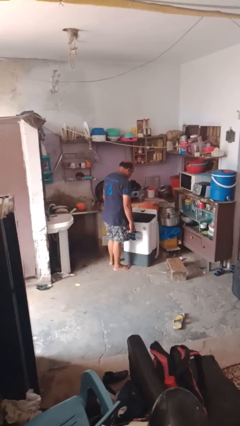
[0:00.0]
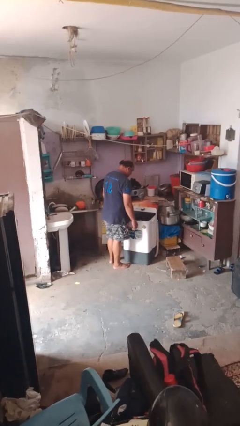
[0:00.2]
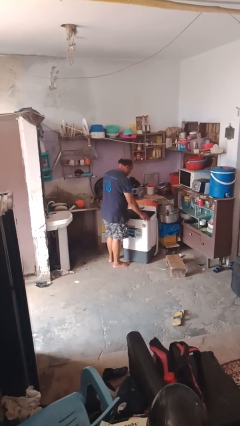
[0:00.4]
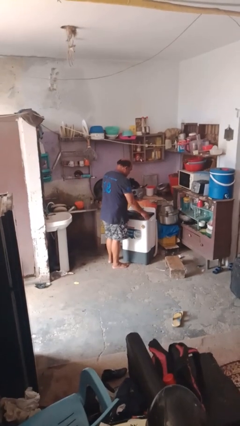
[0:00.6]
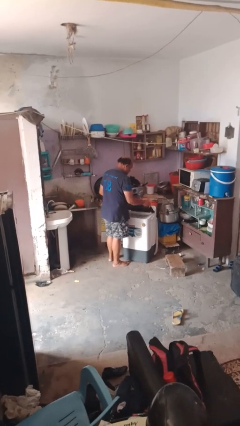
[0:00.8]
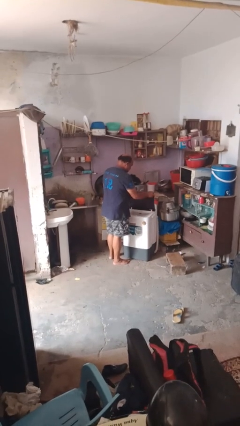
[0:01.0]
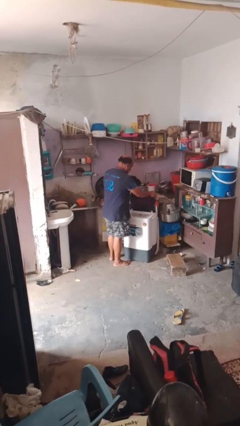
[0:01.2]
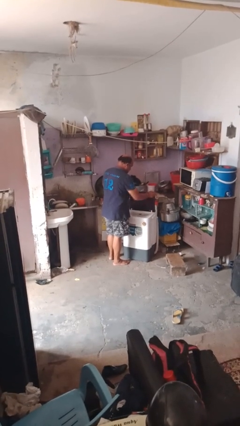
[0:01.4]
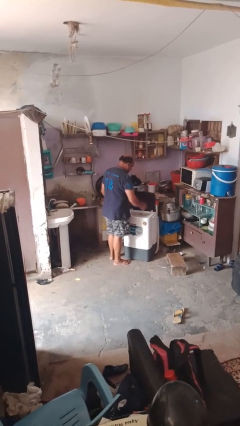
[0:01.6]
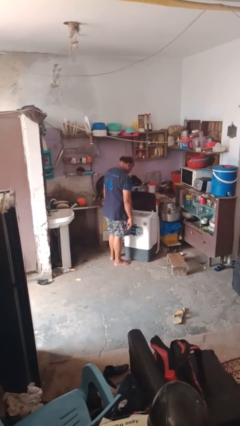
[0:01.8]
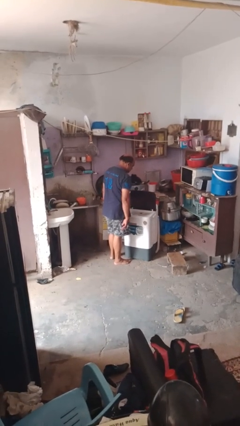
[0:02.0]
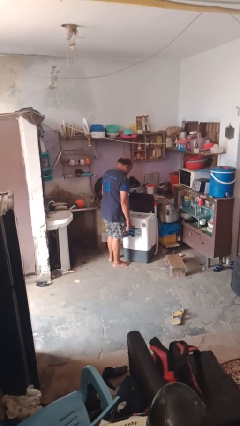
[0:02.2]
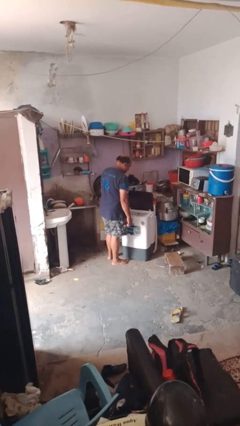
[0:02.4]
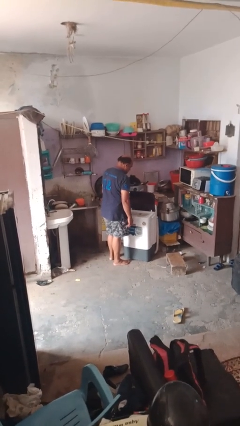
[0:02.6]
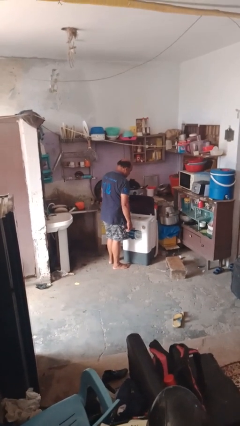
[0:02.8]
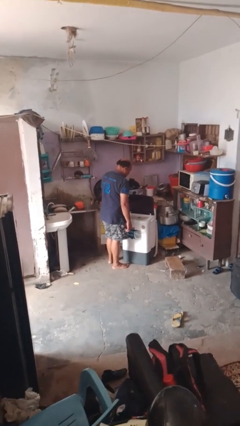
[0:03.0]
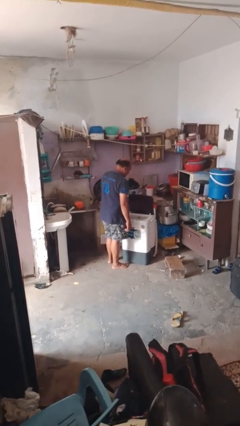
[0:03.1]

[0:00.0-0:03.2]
person opens clothes washer

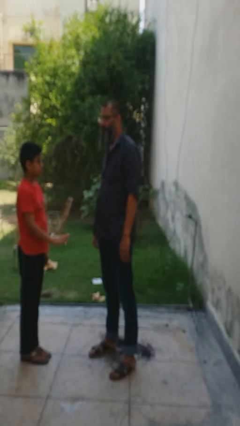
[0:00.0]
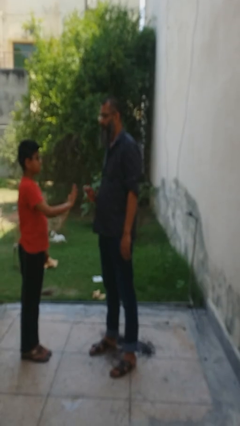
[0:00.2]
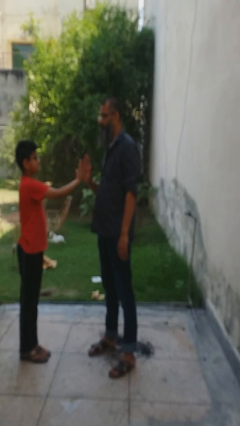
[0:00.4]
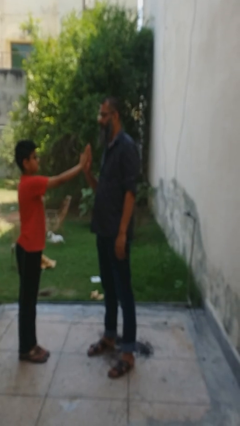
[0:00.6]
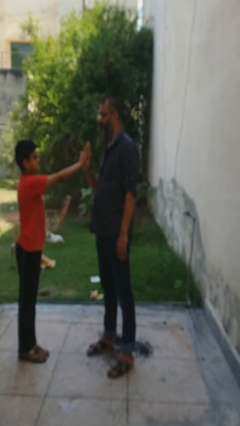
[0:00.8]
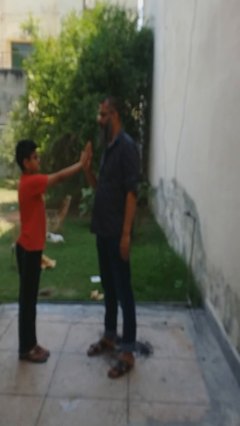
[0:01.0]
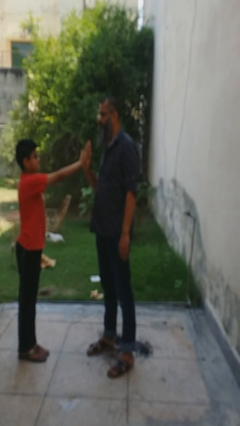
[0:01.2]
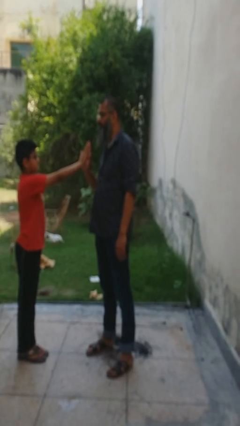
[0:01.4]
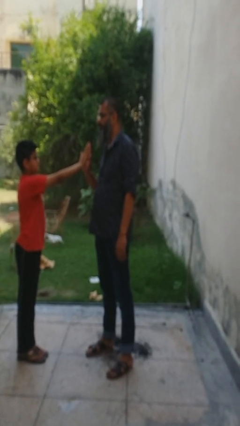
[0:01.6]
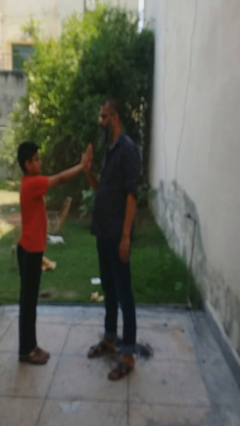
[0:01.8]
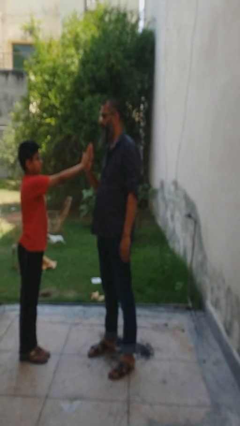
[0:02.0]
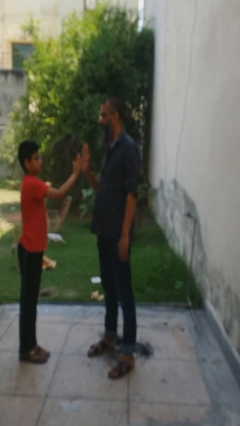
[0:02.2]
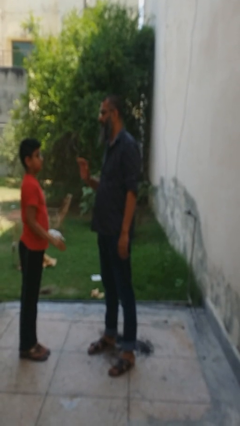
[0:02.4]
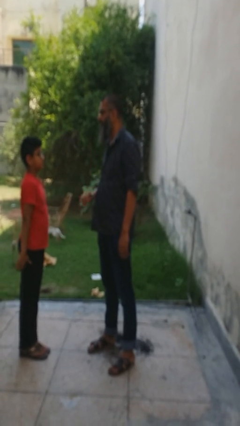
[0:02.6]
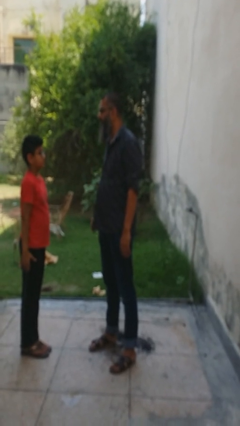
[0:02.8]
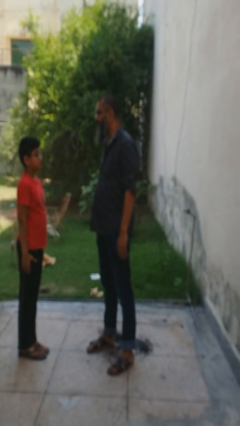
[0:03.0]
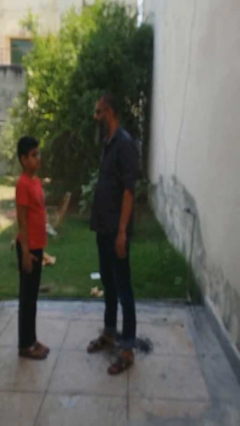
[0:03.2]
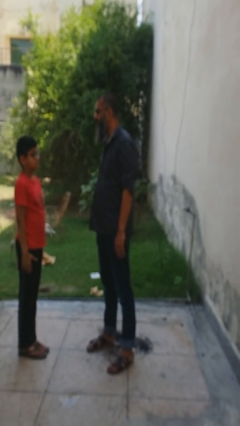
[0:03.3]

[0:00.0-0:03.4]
person highfives hand

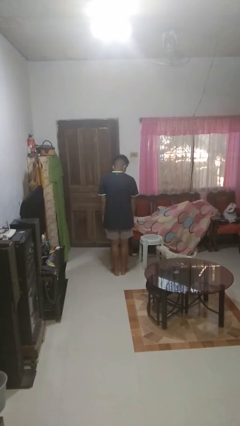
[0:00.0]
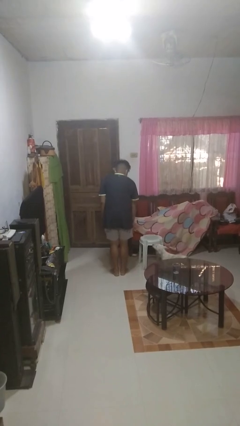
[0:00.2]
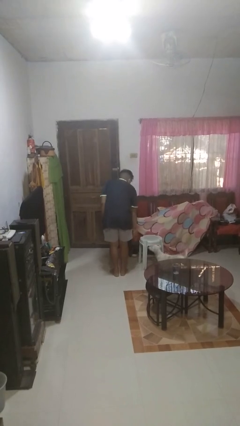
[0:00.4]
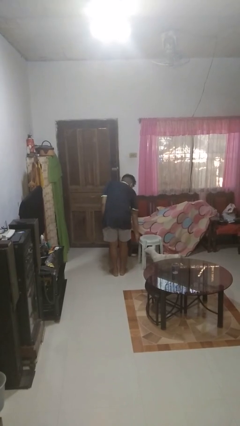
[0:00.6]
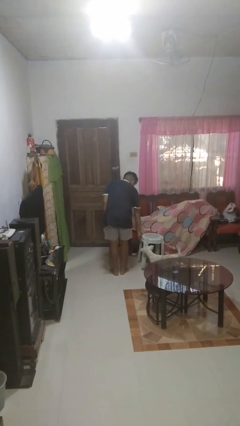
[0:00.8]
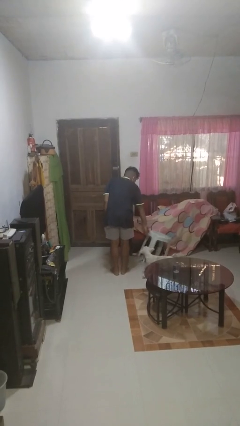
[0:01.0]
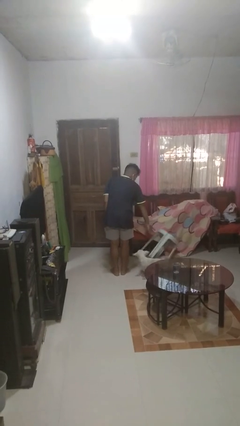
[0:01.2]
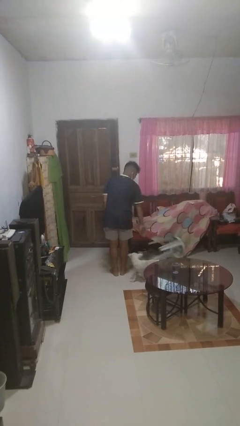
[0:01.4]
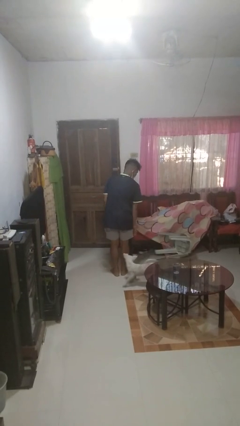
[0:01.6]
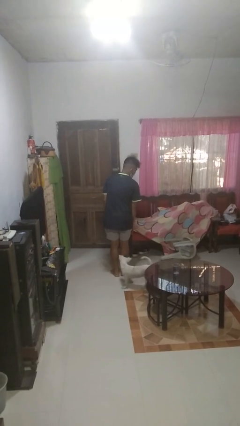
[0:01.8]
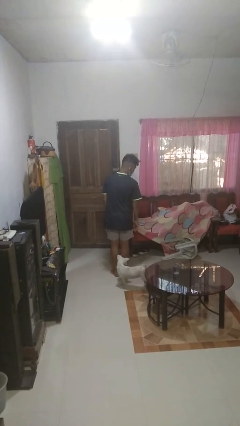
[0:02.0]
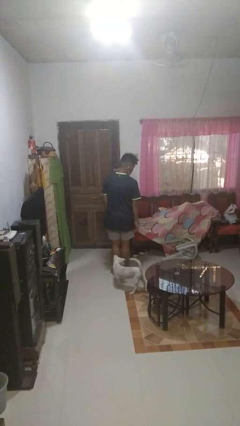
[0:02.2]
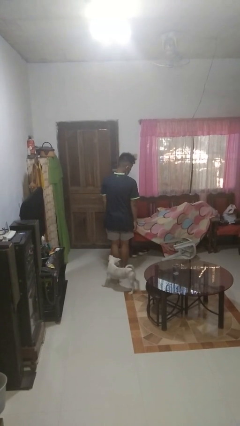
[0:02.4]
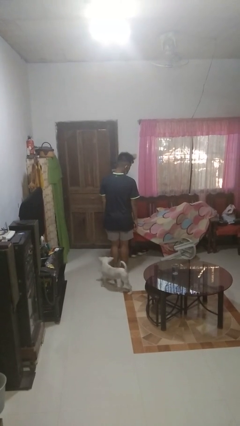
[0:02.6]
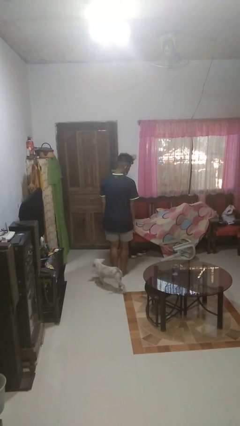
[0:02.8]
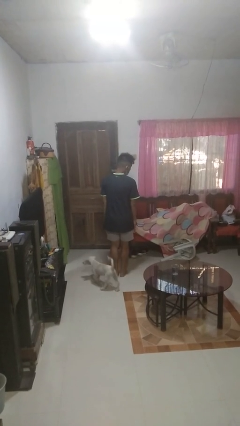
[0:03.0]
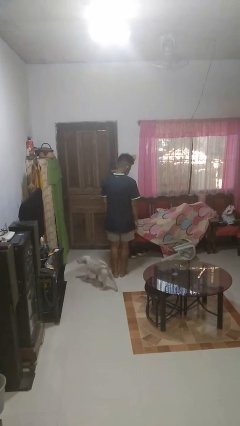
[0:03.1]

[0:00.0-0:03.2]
person knocks over furniture

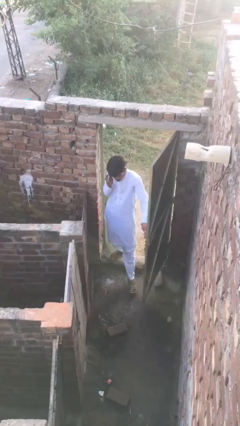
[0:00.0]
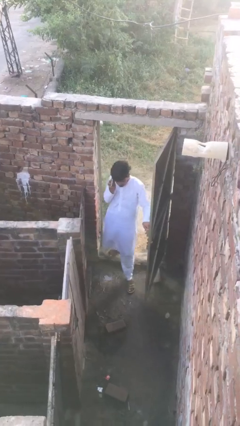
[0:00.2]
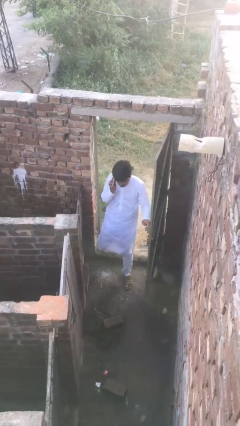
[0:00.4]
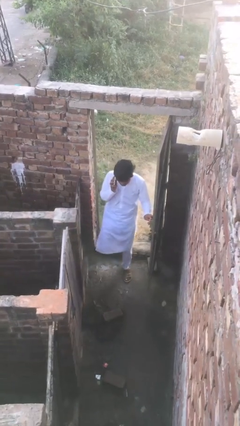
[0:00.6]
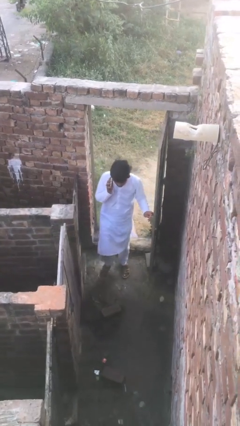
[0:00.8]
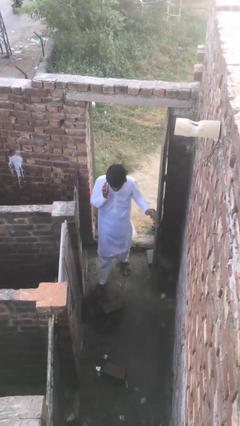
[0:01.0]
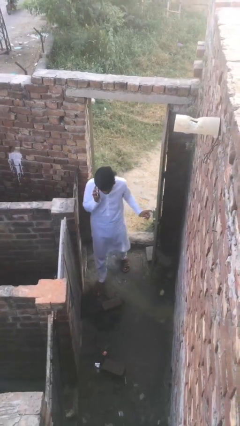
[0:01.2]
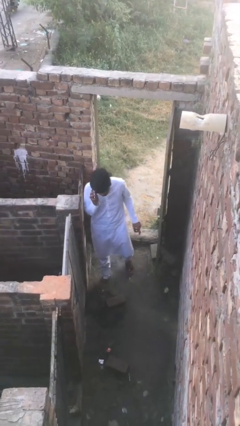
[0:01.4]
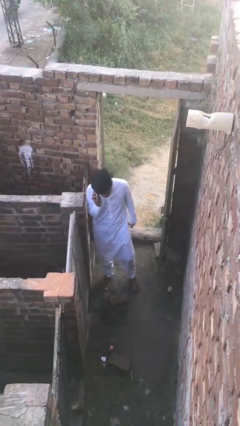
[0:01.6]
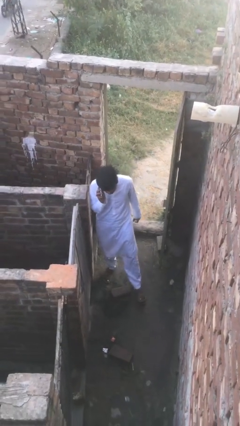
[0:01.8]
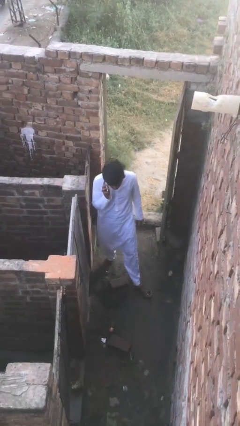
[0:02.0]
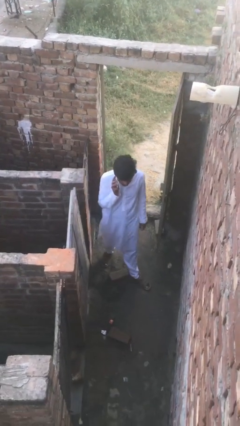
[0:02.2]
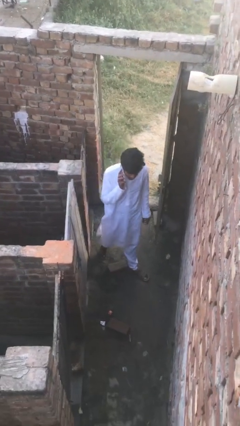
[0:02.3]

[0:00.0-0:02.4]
person enters scene through structure

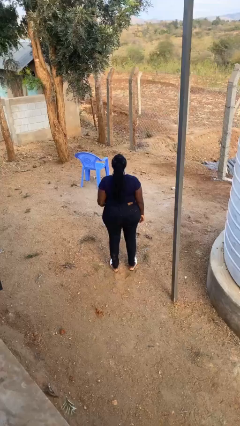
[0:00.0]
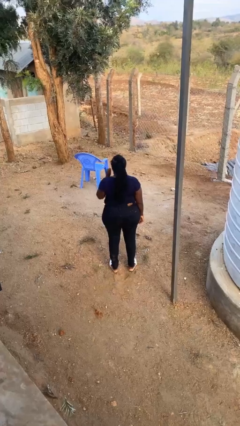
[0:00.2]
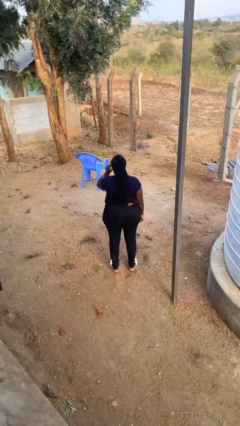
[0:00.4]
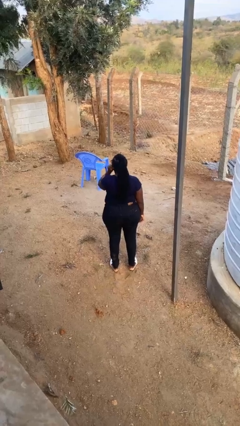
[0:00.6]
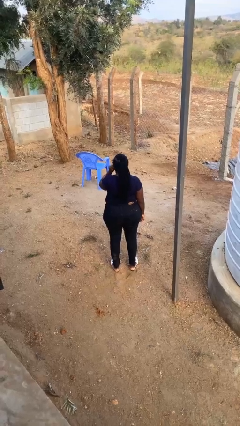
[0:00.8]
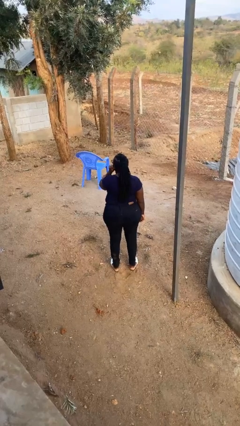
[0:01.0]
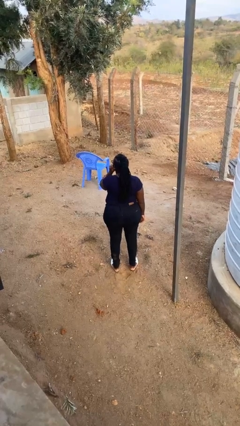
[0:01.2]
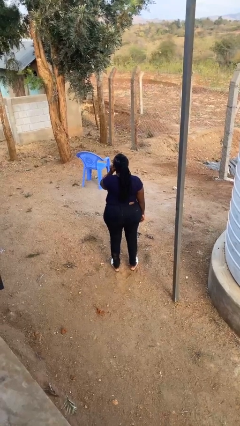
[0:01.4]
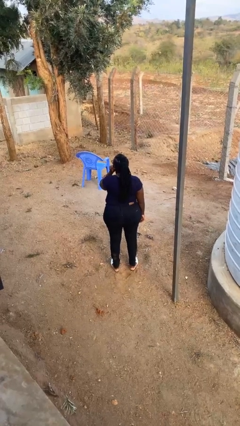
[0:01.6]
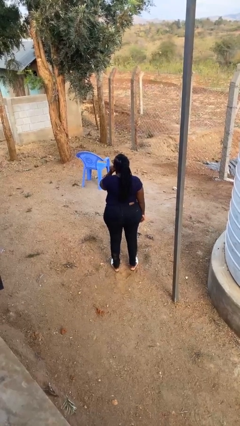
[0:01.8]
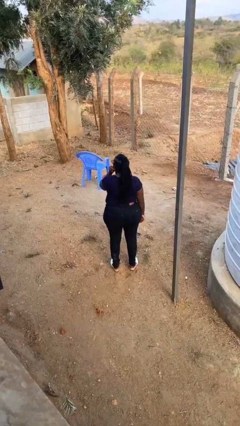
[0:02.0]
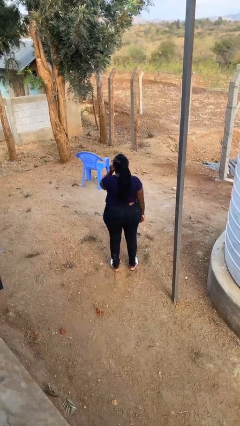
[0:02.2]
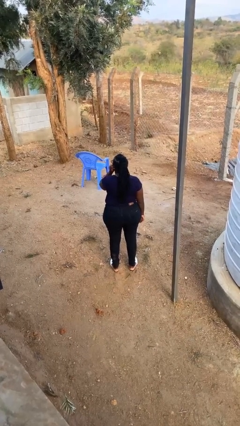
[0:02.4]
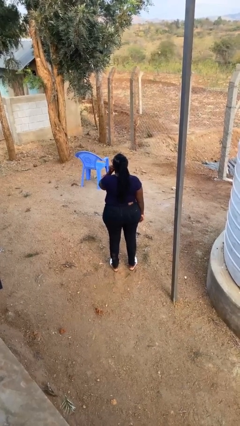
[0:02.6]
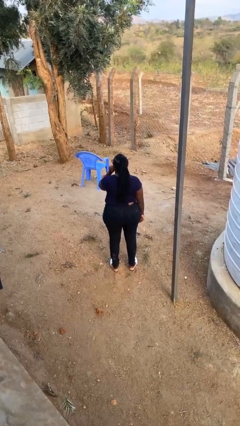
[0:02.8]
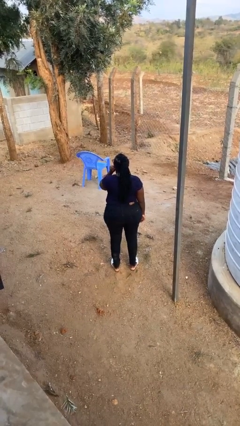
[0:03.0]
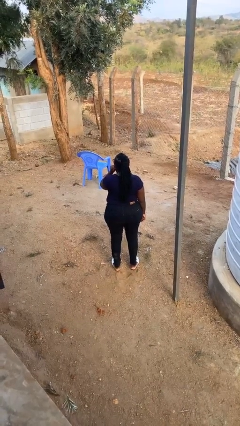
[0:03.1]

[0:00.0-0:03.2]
person touches earlobe

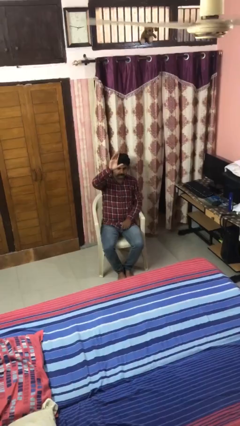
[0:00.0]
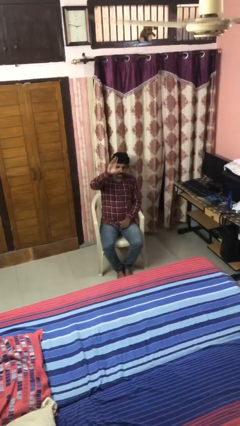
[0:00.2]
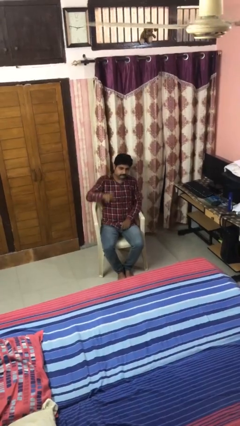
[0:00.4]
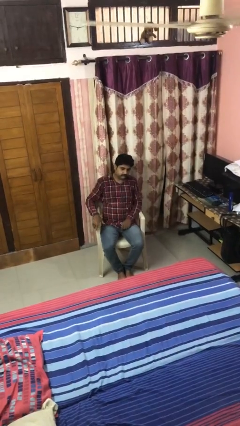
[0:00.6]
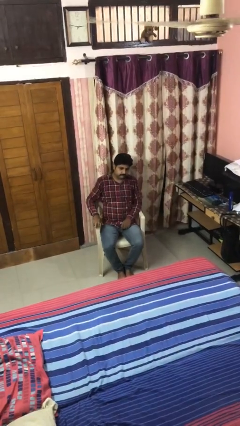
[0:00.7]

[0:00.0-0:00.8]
person gestures lower hand

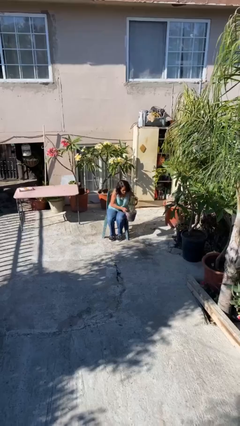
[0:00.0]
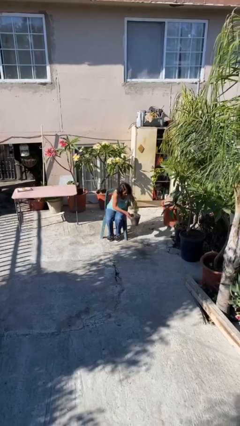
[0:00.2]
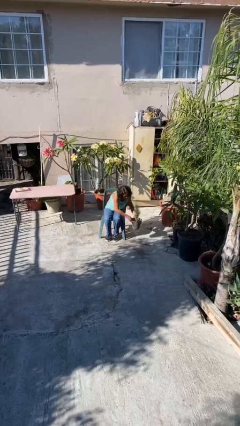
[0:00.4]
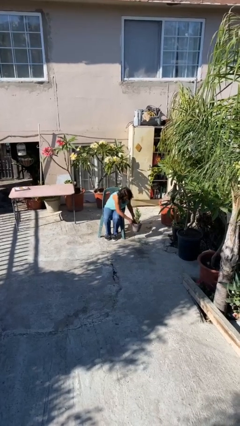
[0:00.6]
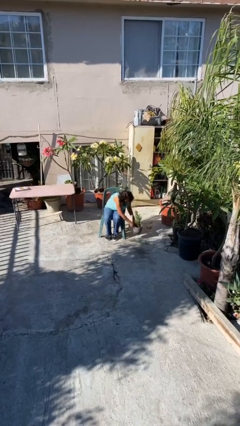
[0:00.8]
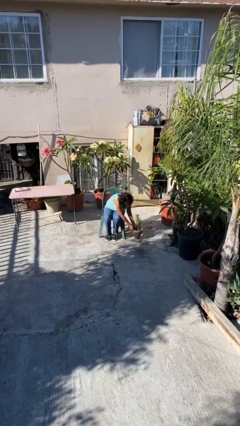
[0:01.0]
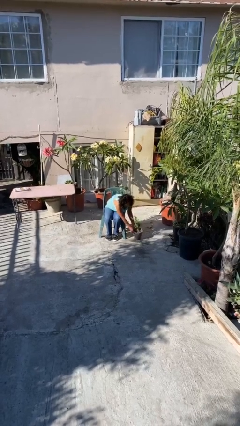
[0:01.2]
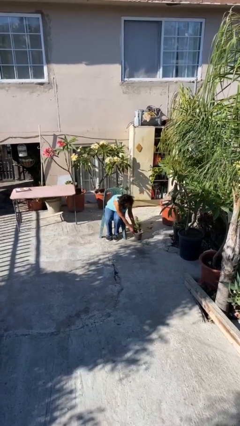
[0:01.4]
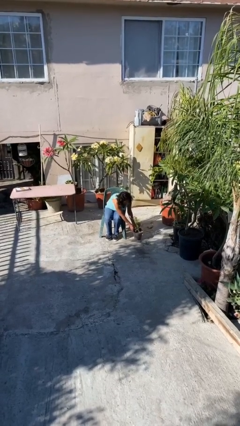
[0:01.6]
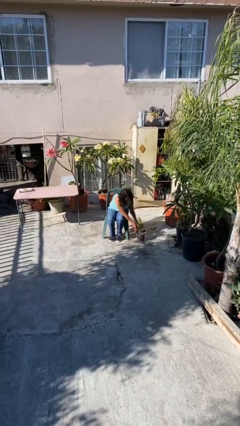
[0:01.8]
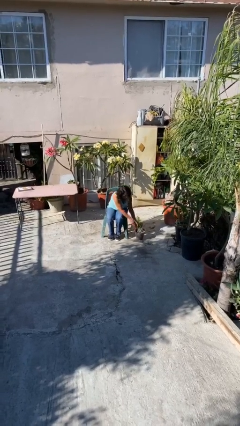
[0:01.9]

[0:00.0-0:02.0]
person puts down object on floor
